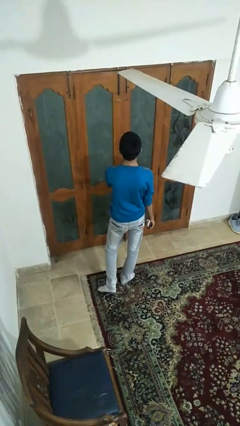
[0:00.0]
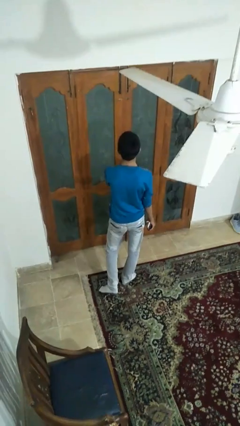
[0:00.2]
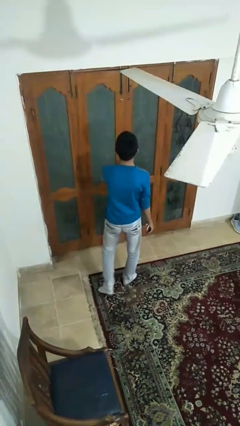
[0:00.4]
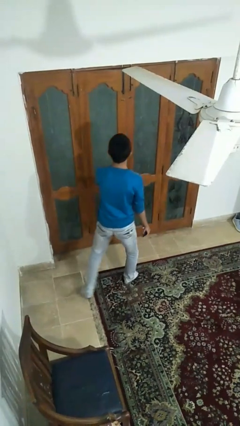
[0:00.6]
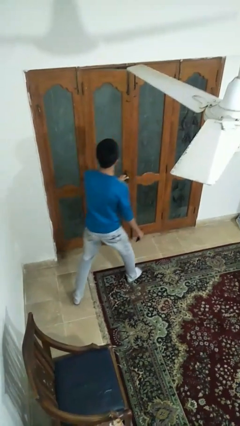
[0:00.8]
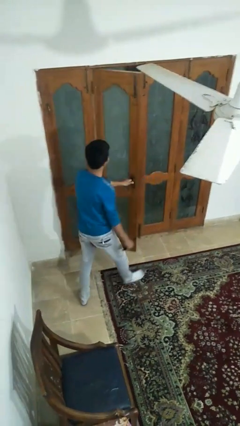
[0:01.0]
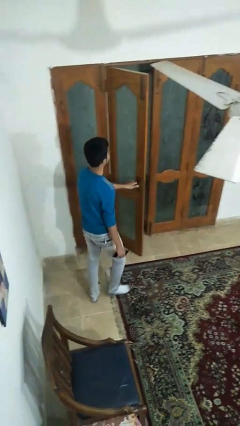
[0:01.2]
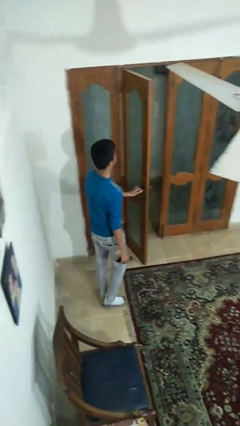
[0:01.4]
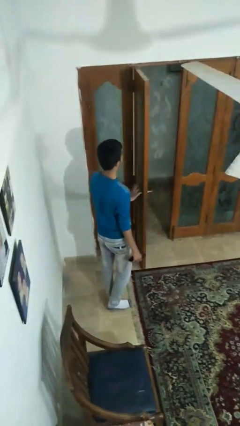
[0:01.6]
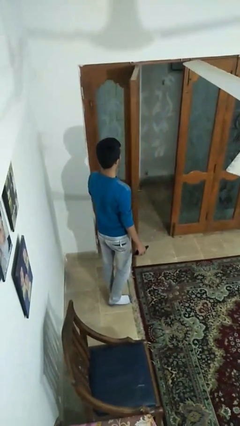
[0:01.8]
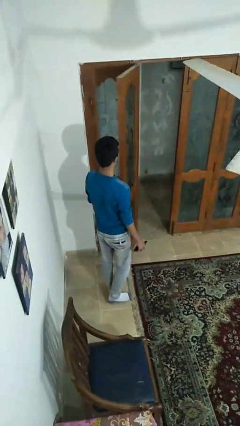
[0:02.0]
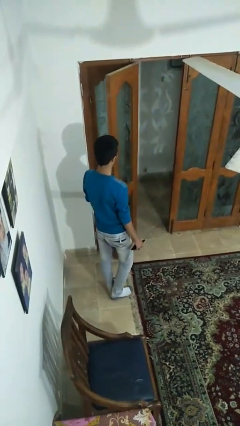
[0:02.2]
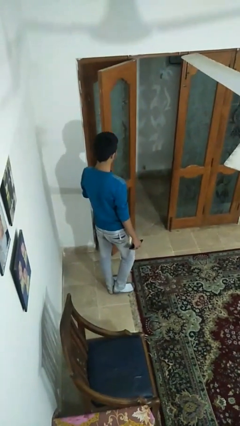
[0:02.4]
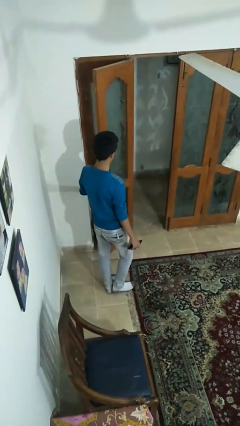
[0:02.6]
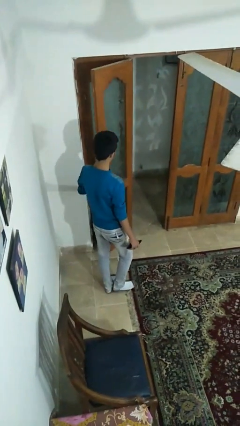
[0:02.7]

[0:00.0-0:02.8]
person opens facility door

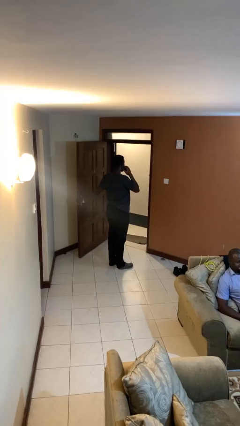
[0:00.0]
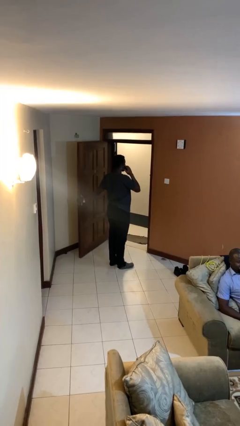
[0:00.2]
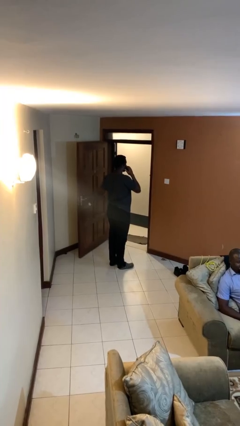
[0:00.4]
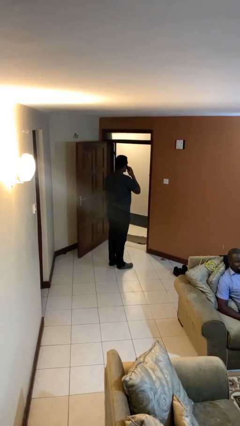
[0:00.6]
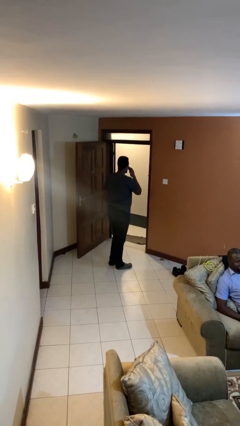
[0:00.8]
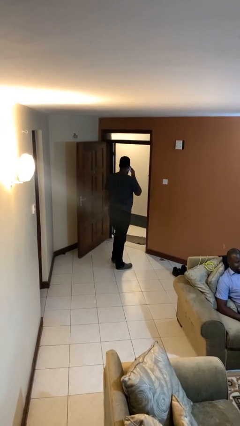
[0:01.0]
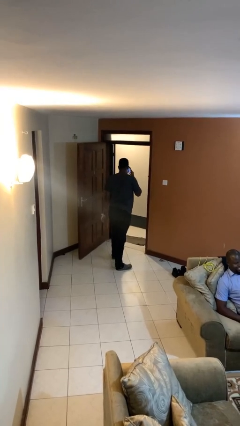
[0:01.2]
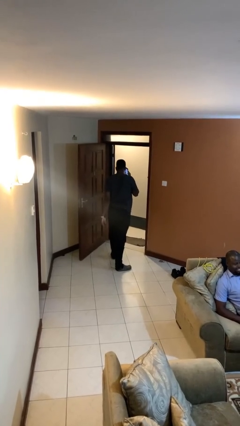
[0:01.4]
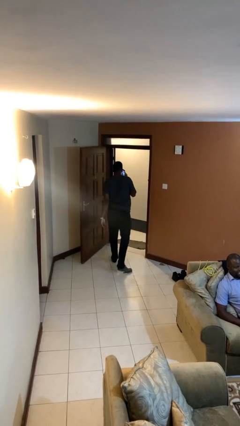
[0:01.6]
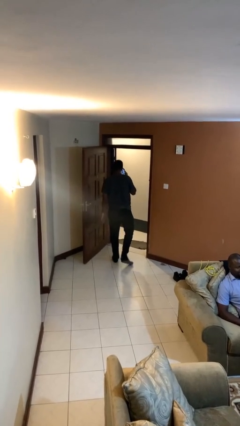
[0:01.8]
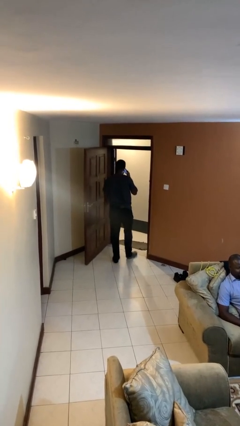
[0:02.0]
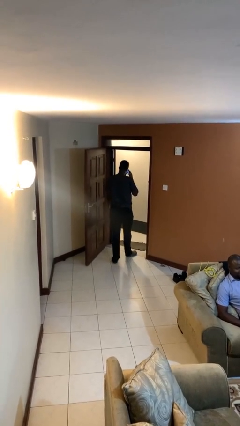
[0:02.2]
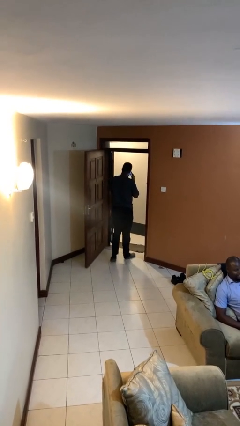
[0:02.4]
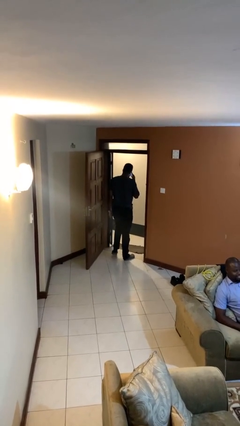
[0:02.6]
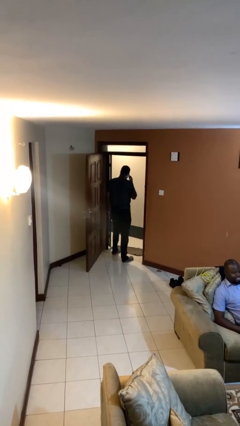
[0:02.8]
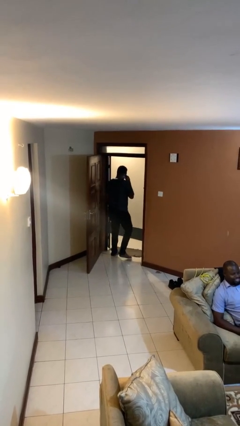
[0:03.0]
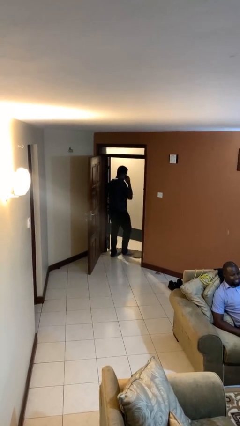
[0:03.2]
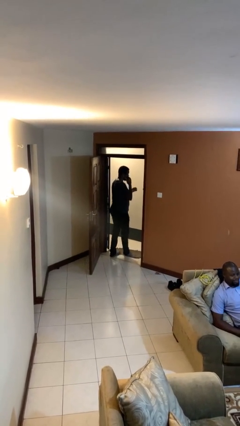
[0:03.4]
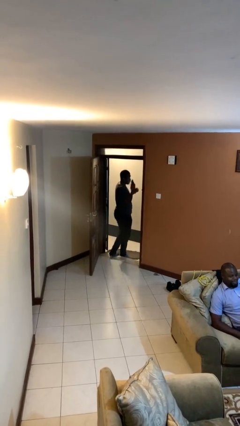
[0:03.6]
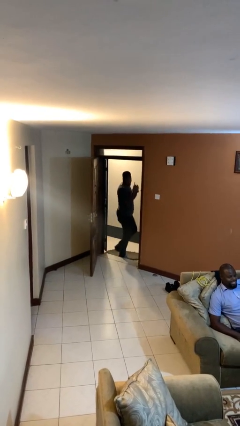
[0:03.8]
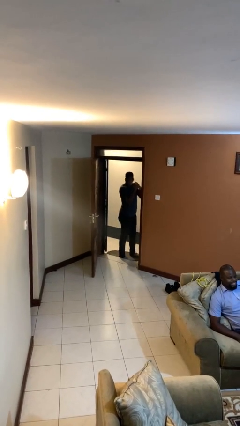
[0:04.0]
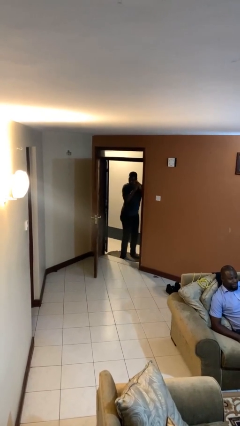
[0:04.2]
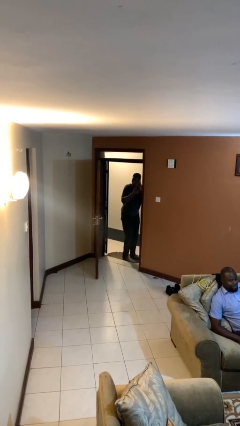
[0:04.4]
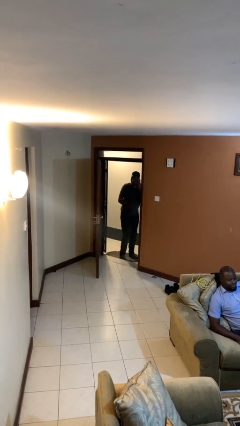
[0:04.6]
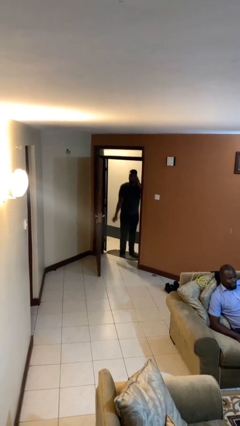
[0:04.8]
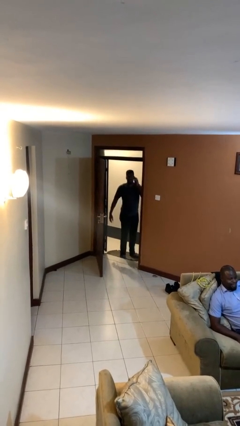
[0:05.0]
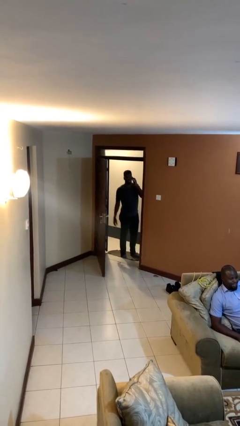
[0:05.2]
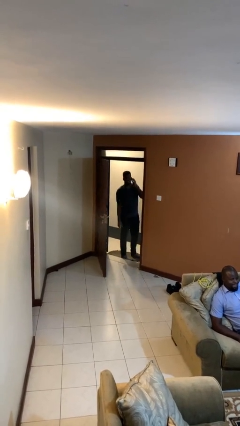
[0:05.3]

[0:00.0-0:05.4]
person exits scene through structure

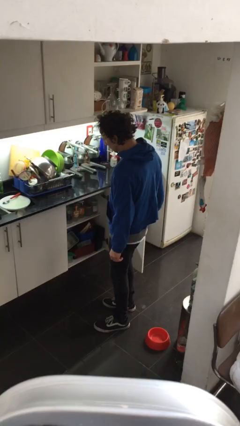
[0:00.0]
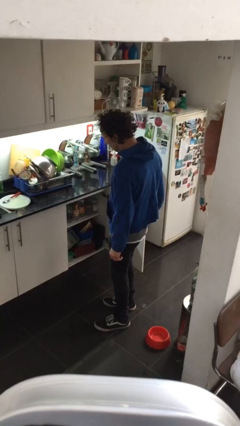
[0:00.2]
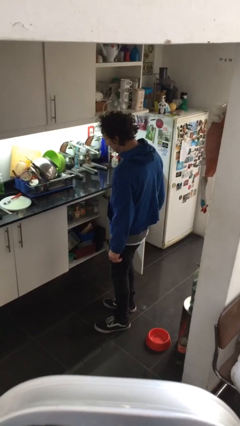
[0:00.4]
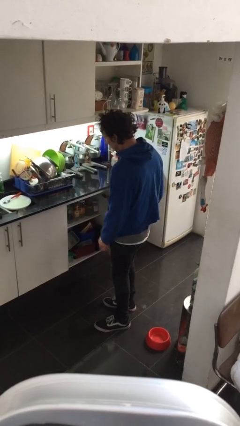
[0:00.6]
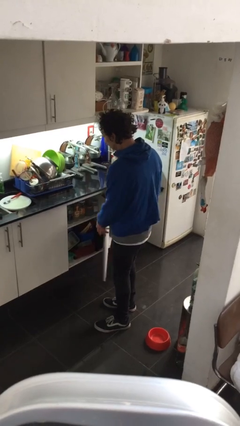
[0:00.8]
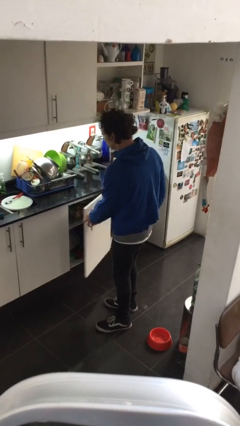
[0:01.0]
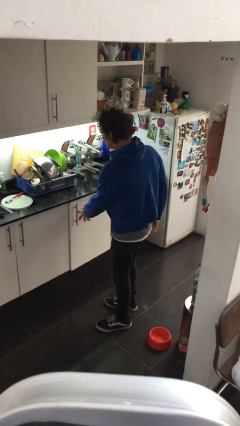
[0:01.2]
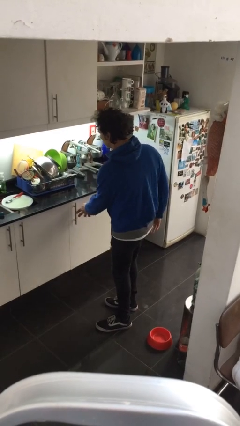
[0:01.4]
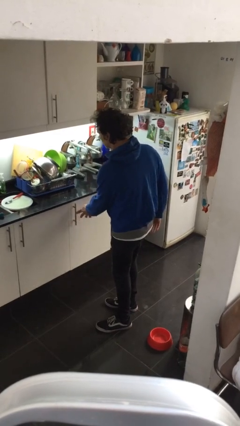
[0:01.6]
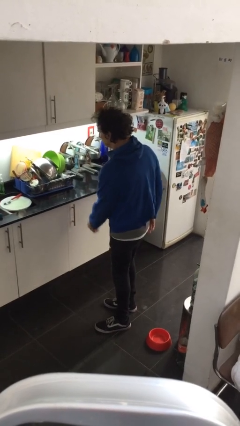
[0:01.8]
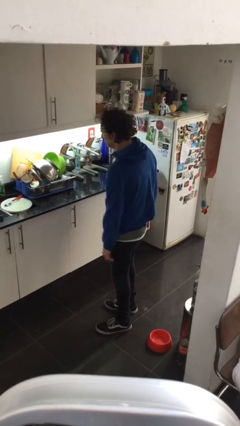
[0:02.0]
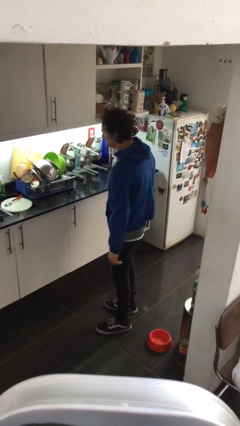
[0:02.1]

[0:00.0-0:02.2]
person closes cabinet

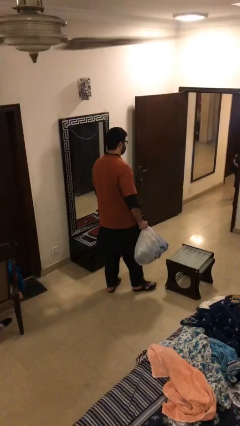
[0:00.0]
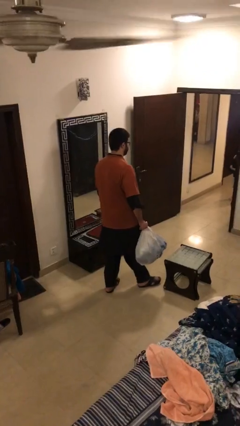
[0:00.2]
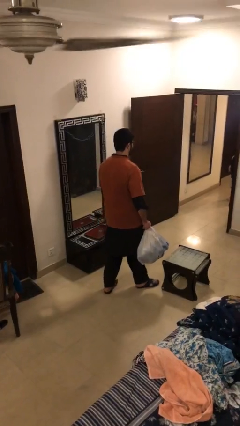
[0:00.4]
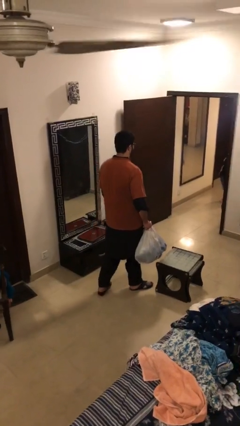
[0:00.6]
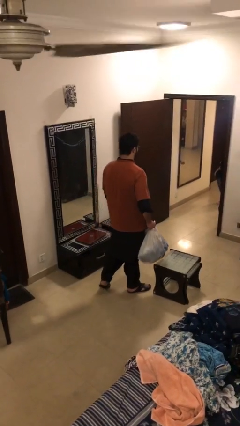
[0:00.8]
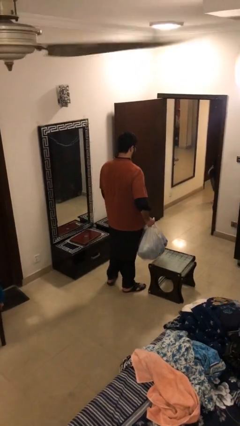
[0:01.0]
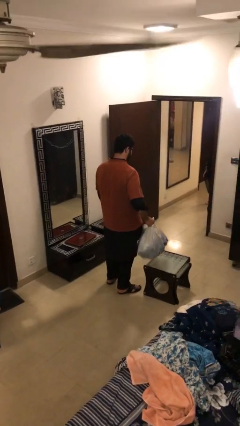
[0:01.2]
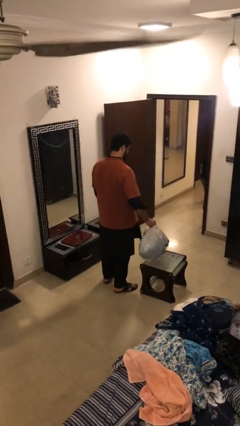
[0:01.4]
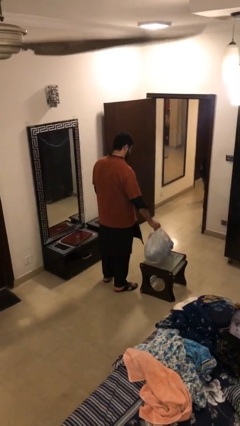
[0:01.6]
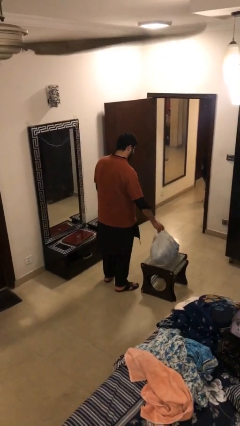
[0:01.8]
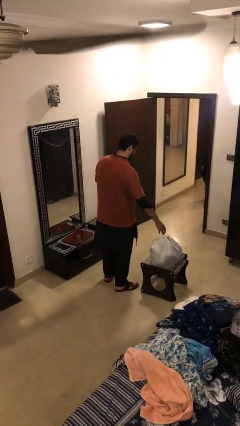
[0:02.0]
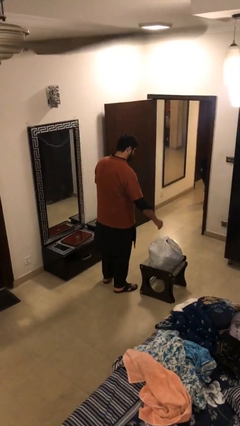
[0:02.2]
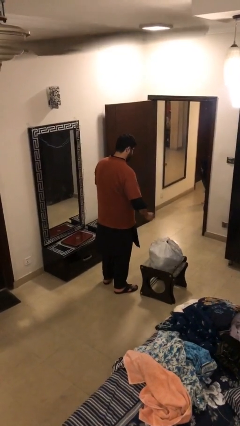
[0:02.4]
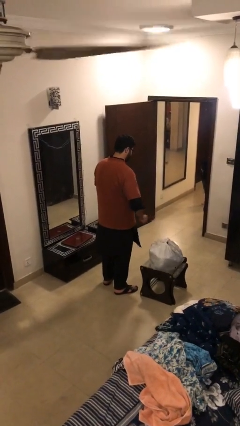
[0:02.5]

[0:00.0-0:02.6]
person puts down object on table

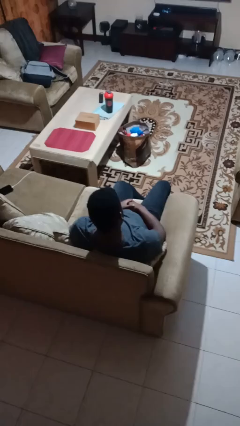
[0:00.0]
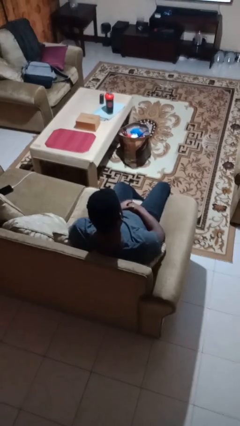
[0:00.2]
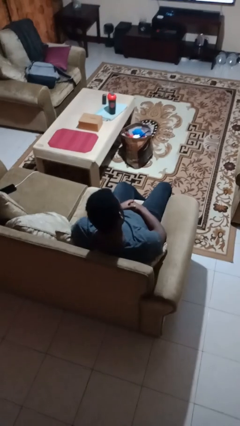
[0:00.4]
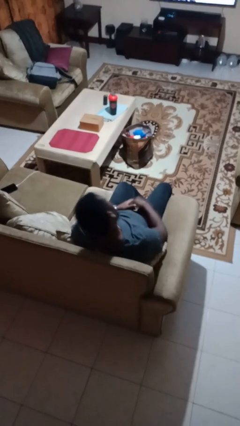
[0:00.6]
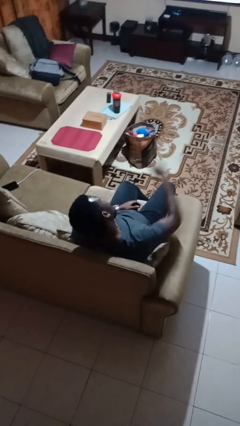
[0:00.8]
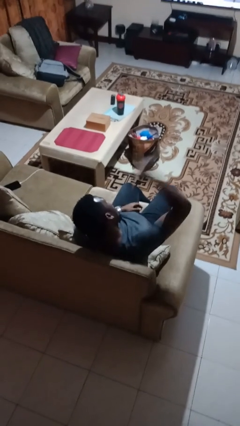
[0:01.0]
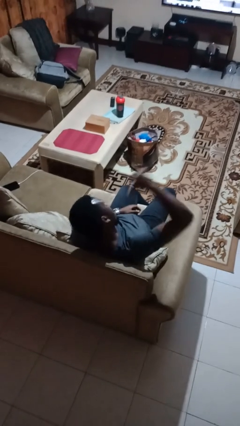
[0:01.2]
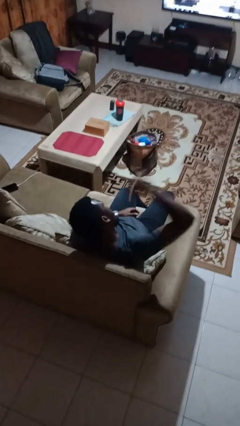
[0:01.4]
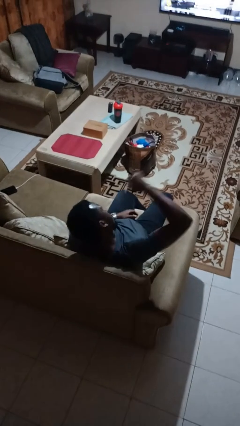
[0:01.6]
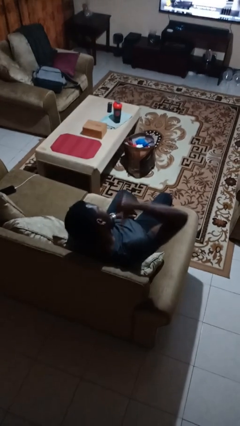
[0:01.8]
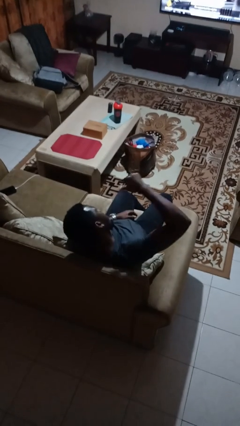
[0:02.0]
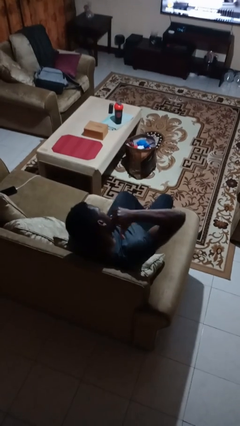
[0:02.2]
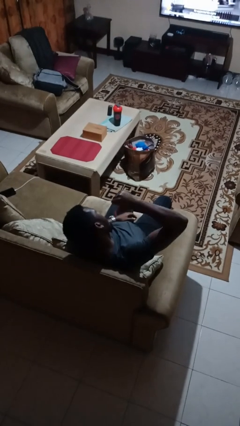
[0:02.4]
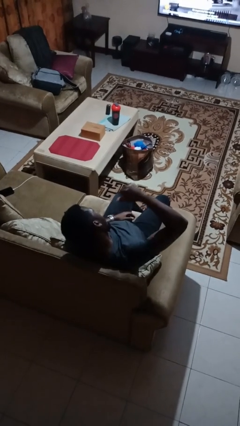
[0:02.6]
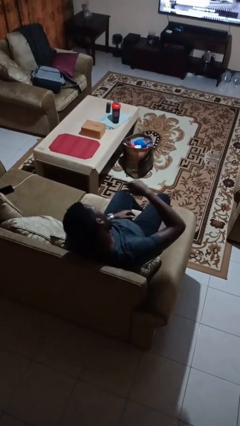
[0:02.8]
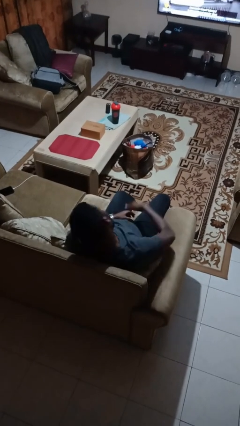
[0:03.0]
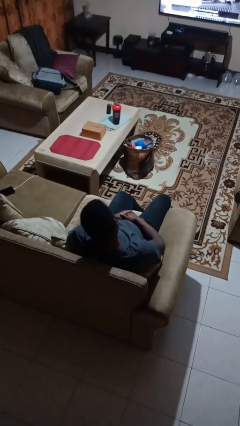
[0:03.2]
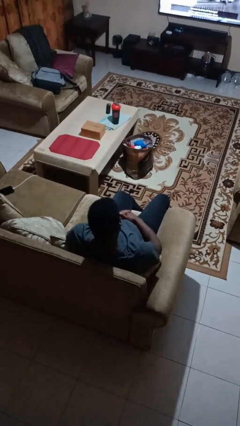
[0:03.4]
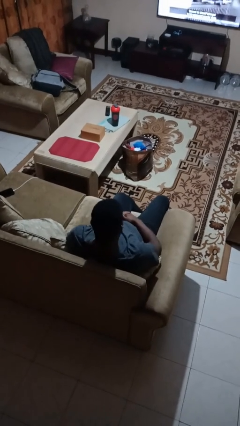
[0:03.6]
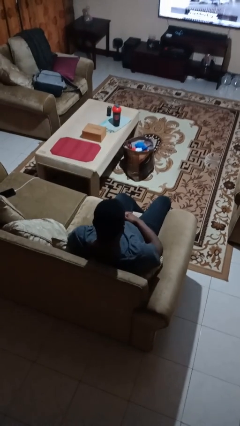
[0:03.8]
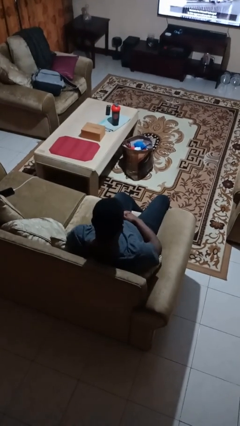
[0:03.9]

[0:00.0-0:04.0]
person gestures behind me

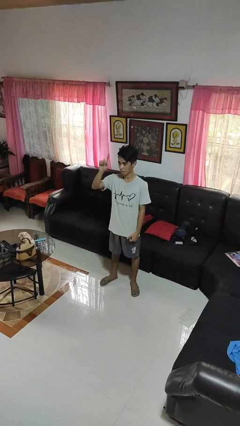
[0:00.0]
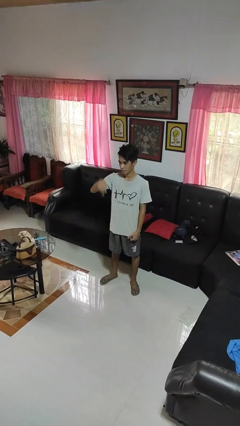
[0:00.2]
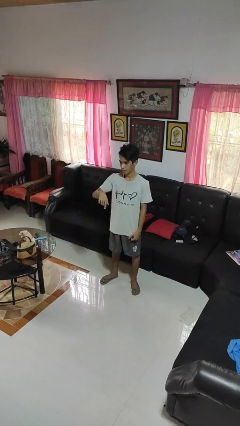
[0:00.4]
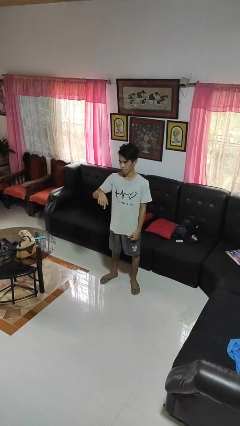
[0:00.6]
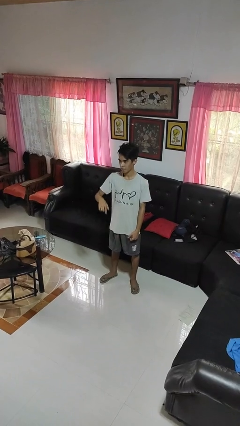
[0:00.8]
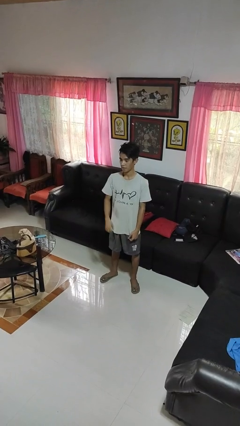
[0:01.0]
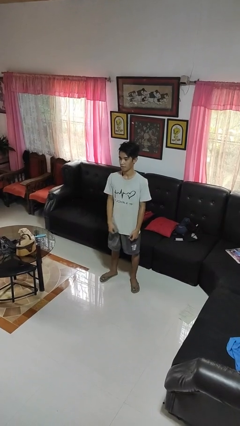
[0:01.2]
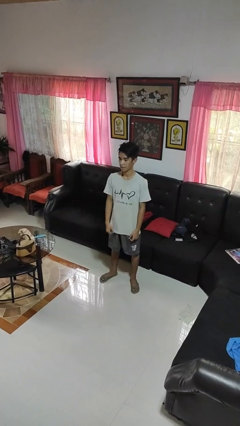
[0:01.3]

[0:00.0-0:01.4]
person gestures swipe down
